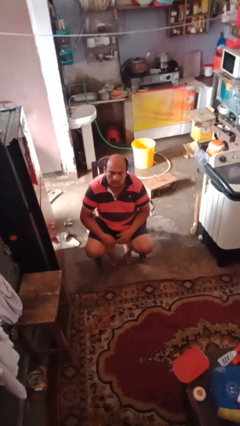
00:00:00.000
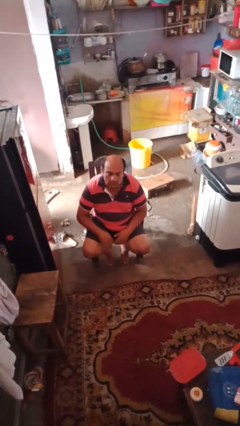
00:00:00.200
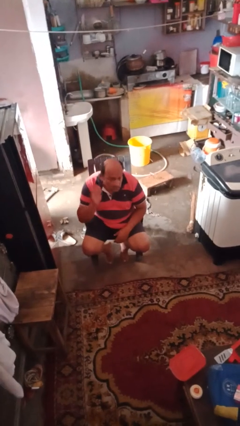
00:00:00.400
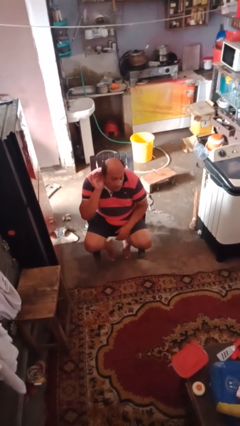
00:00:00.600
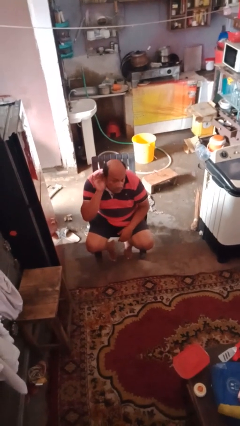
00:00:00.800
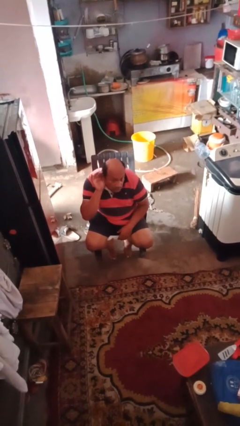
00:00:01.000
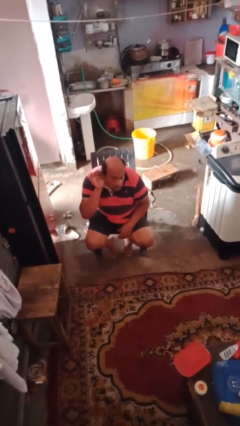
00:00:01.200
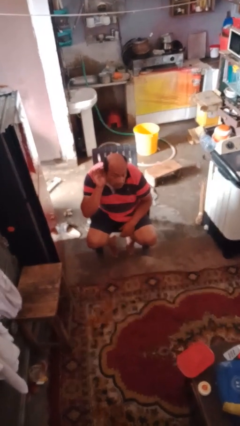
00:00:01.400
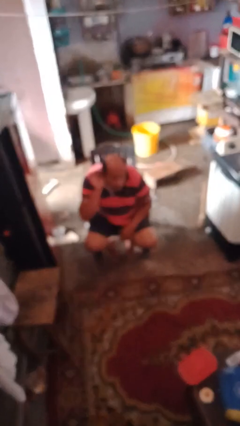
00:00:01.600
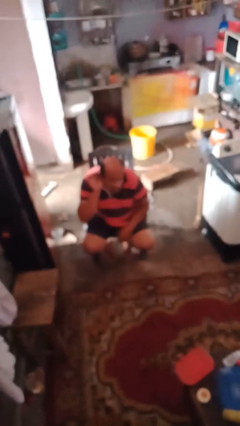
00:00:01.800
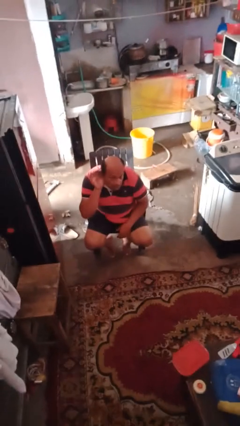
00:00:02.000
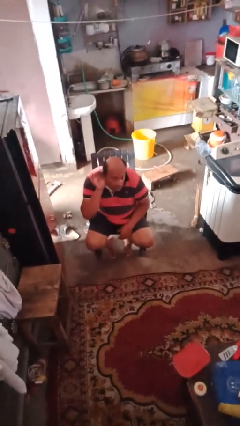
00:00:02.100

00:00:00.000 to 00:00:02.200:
person gestures listen closely

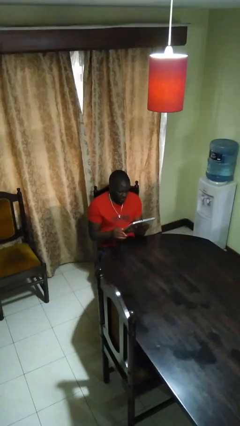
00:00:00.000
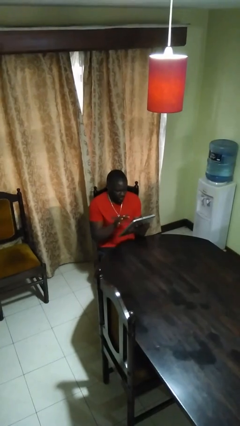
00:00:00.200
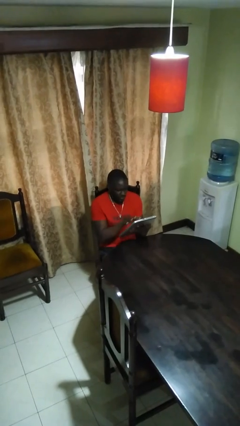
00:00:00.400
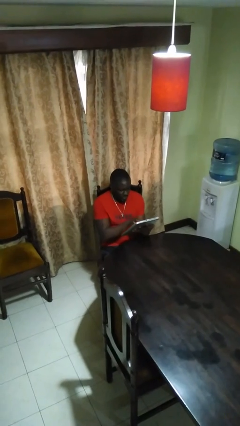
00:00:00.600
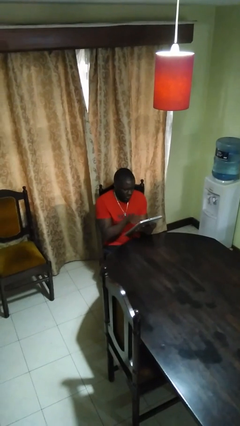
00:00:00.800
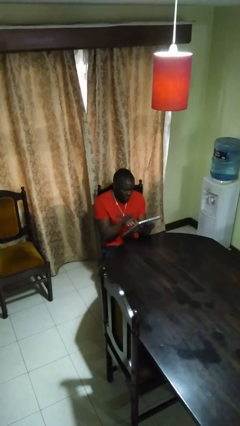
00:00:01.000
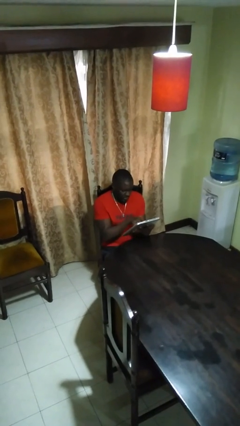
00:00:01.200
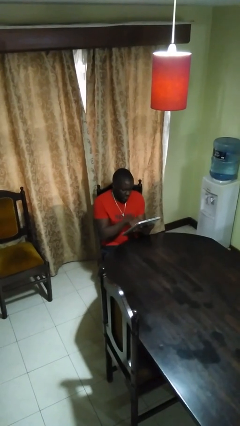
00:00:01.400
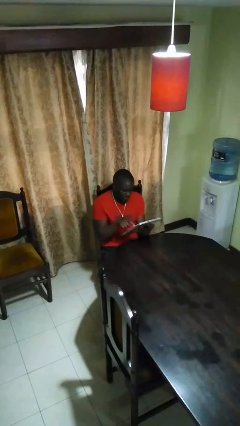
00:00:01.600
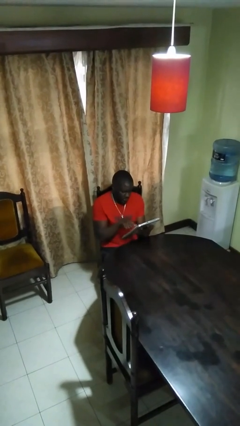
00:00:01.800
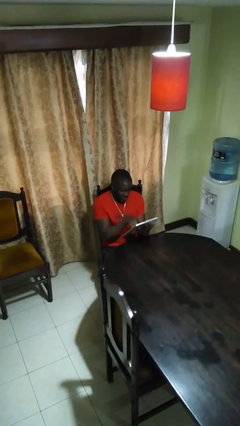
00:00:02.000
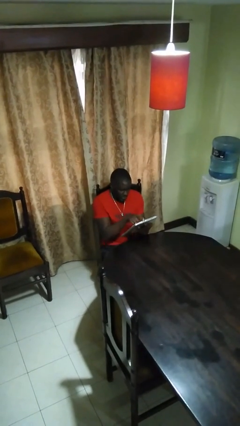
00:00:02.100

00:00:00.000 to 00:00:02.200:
person interacts with tablet

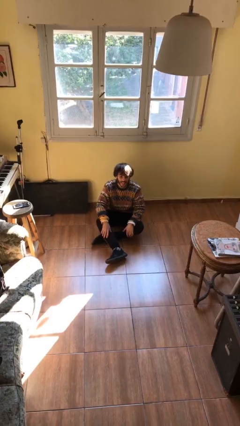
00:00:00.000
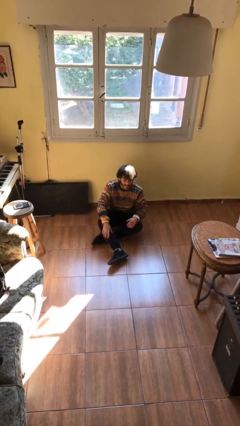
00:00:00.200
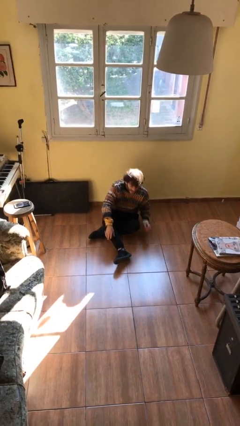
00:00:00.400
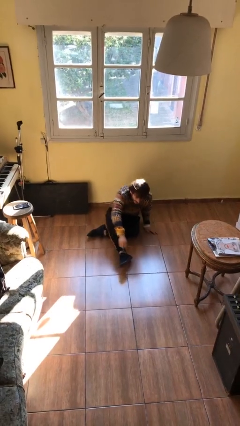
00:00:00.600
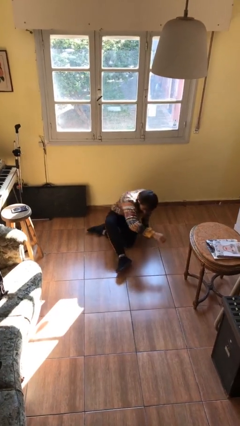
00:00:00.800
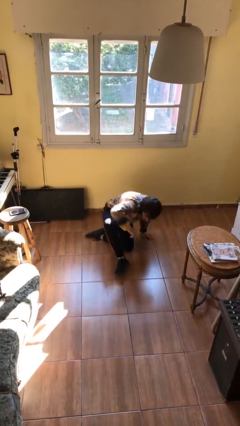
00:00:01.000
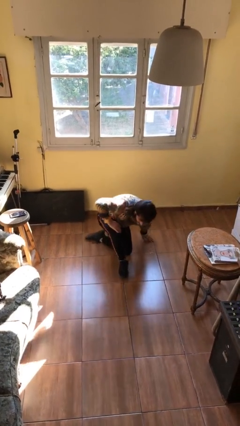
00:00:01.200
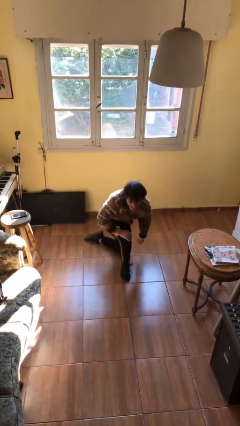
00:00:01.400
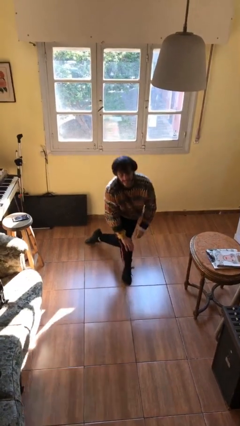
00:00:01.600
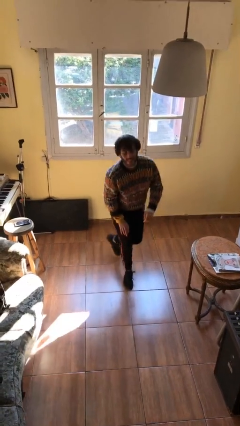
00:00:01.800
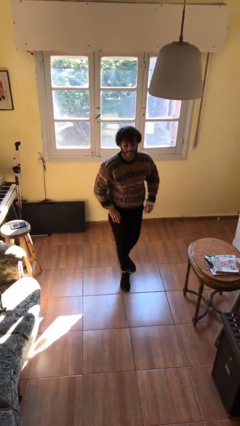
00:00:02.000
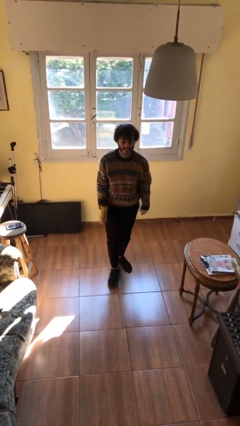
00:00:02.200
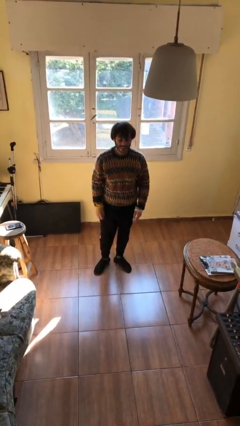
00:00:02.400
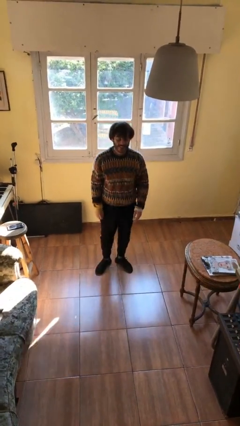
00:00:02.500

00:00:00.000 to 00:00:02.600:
person stands up from floor

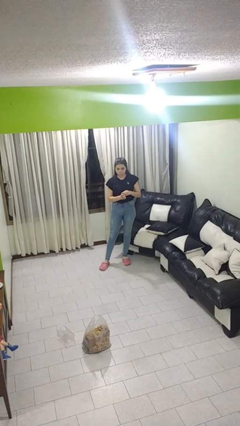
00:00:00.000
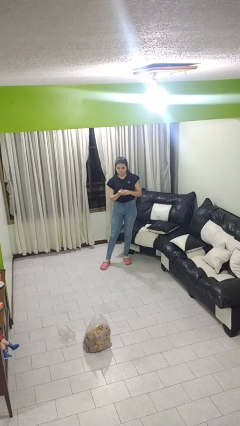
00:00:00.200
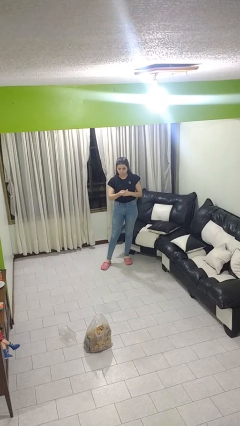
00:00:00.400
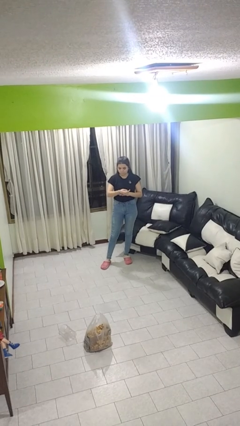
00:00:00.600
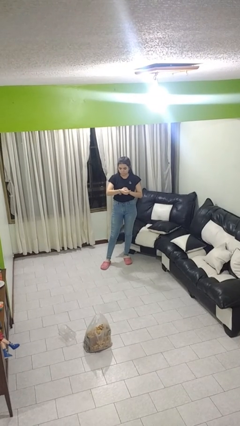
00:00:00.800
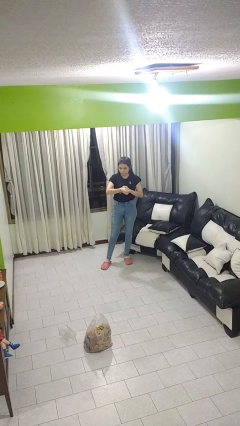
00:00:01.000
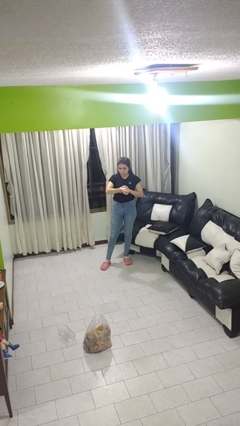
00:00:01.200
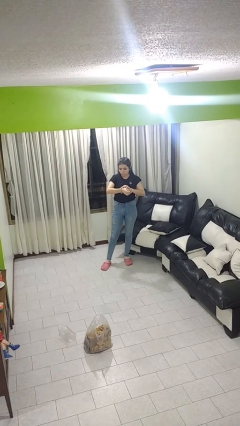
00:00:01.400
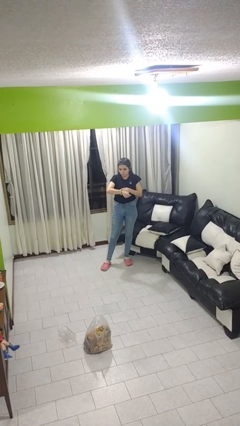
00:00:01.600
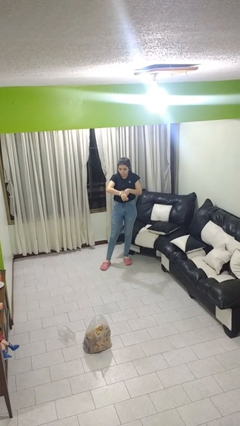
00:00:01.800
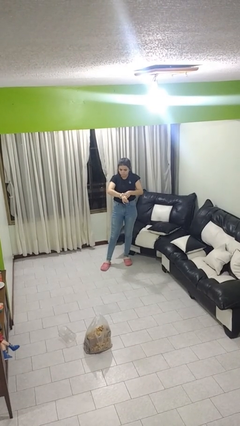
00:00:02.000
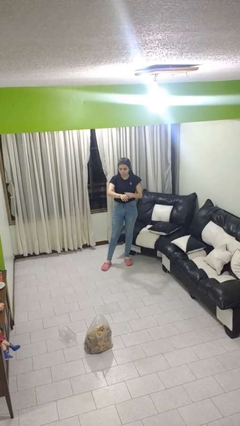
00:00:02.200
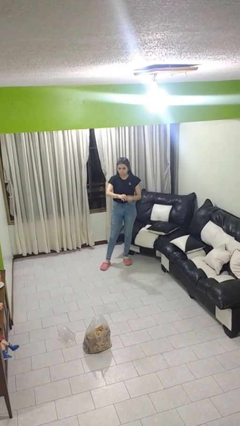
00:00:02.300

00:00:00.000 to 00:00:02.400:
person puts on wristwatch

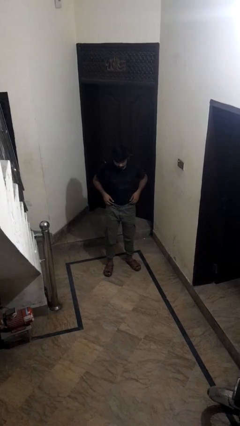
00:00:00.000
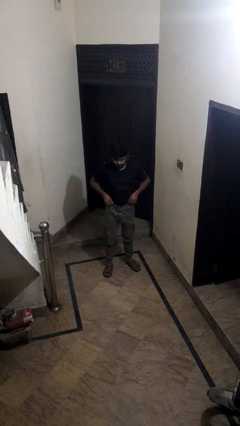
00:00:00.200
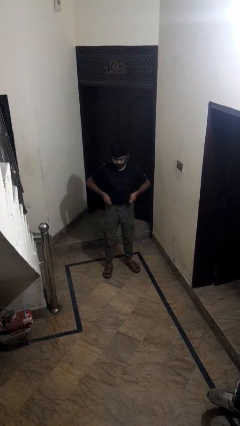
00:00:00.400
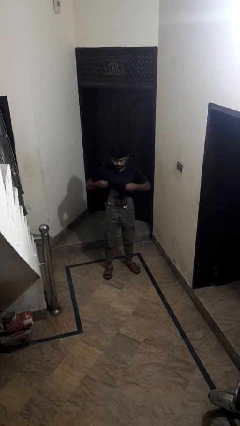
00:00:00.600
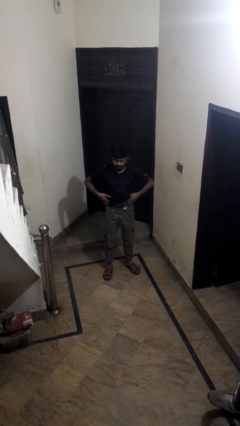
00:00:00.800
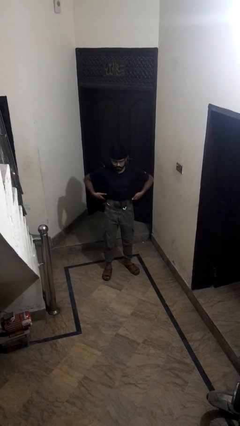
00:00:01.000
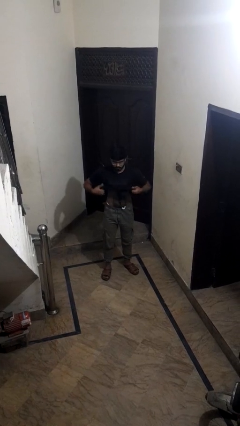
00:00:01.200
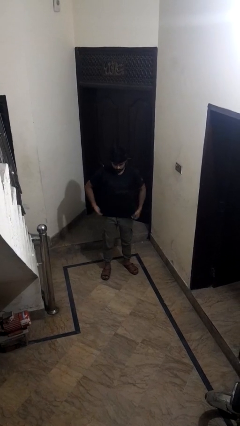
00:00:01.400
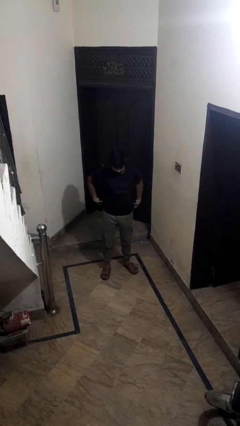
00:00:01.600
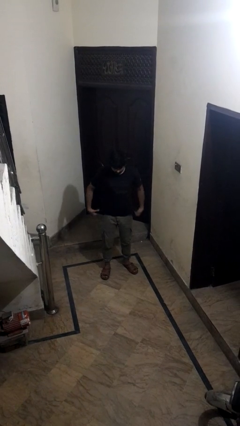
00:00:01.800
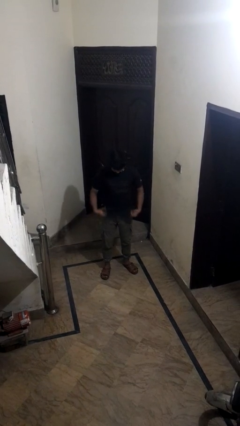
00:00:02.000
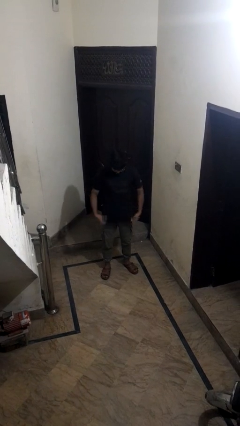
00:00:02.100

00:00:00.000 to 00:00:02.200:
person untucks shirt

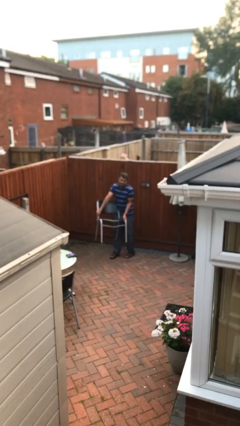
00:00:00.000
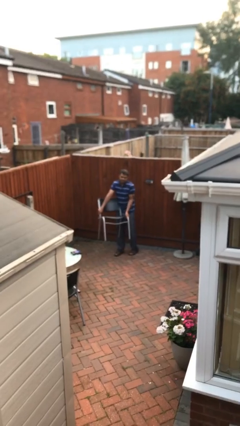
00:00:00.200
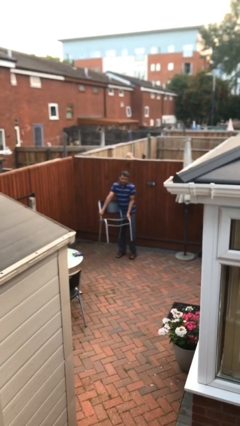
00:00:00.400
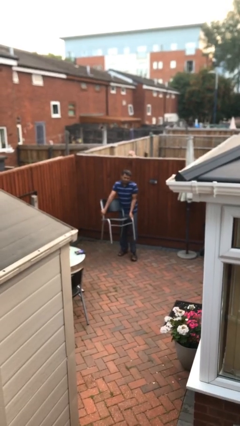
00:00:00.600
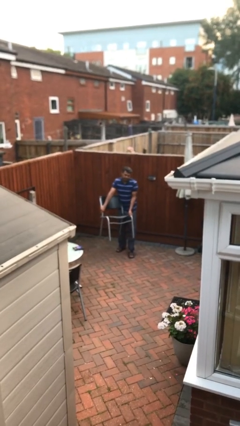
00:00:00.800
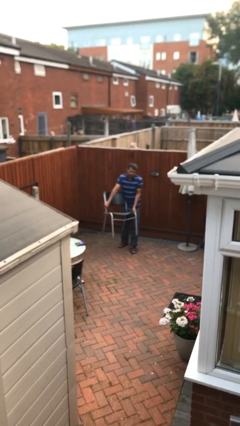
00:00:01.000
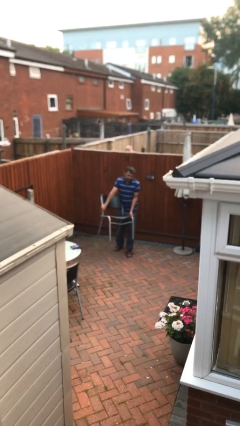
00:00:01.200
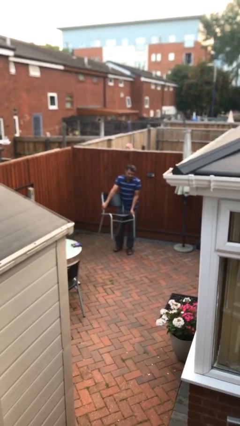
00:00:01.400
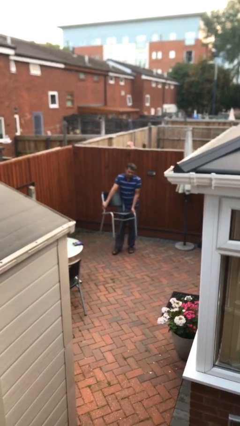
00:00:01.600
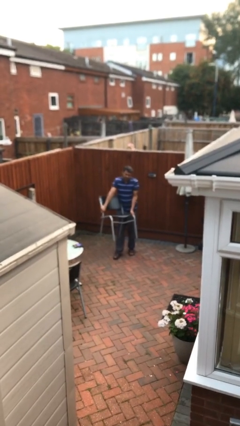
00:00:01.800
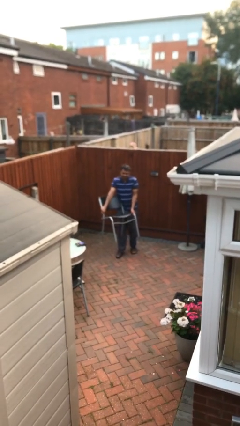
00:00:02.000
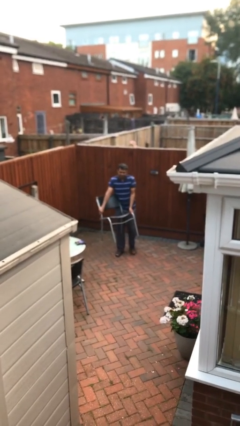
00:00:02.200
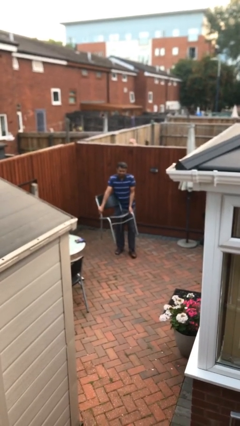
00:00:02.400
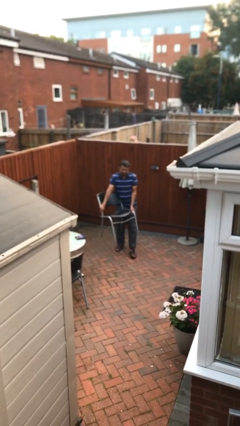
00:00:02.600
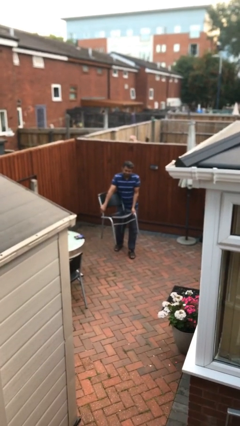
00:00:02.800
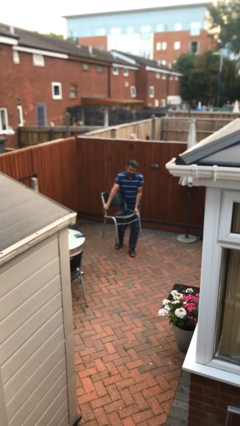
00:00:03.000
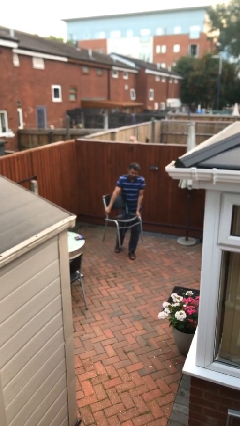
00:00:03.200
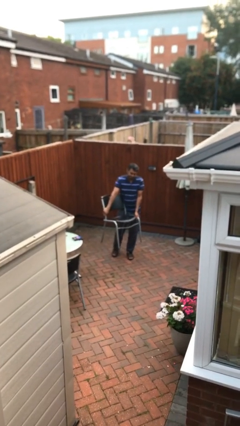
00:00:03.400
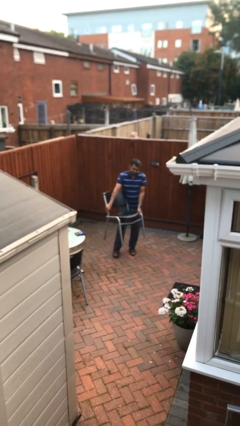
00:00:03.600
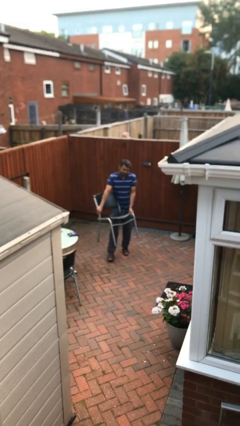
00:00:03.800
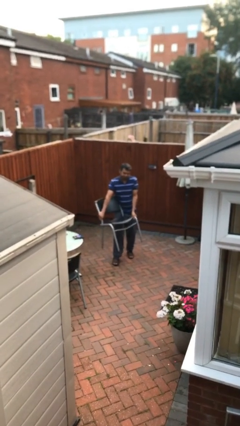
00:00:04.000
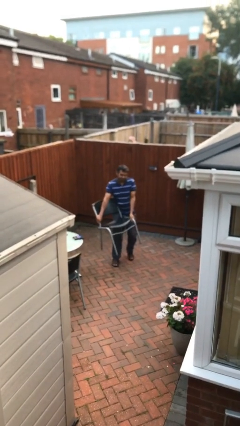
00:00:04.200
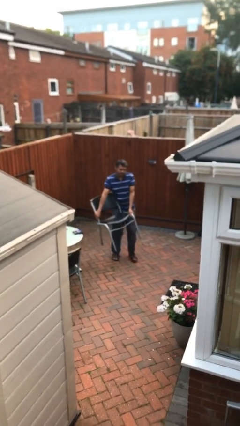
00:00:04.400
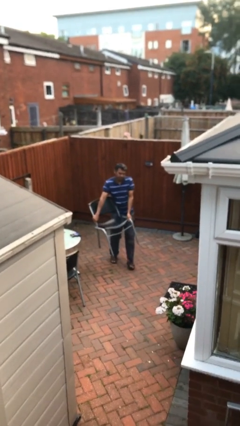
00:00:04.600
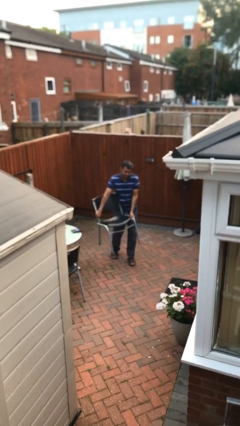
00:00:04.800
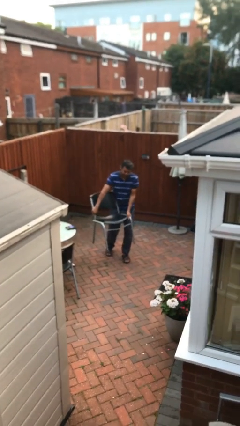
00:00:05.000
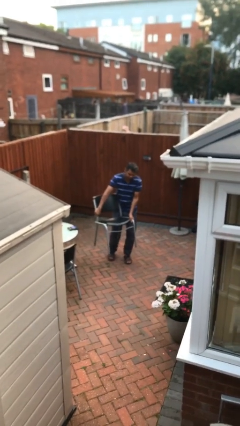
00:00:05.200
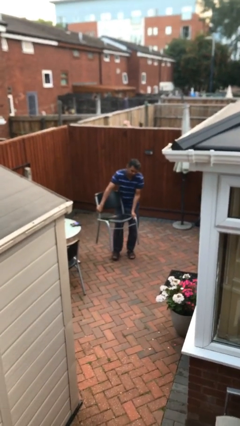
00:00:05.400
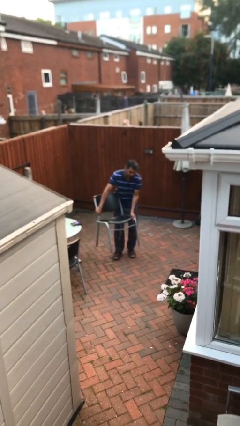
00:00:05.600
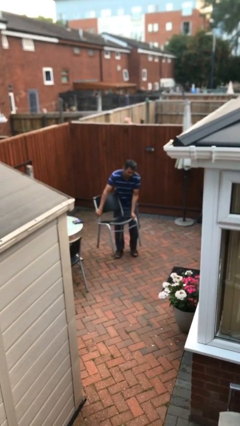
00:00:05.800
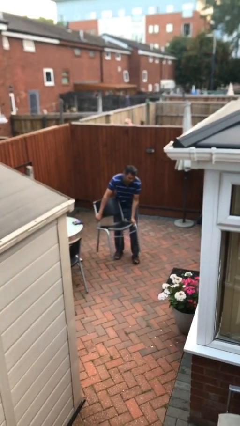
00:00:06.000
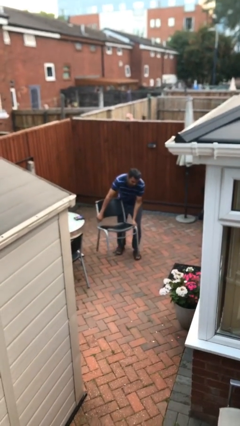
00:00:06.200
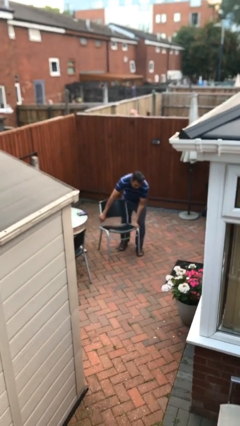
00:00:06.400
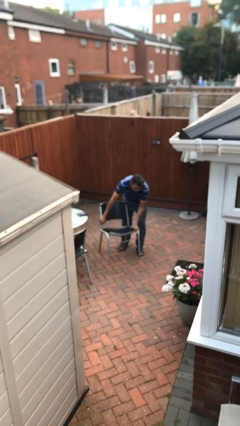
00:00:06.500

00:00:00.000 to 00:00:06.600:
person carries heavy object
